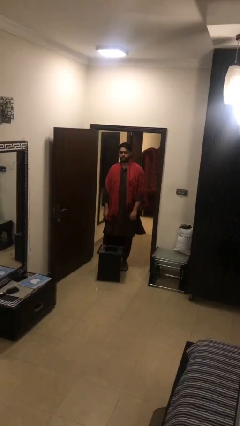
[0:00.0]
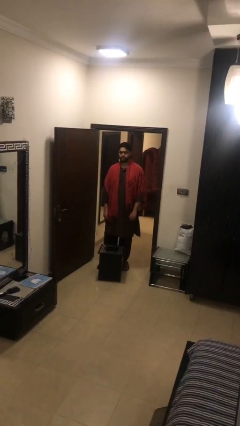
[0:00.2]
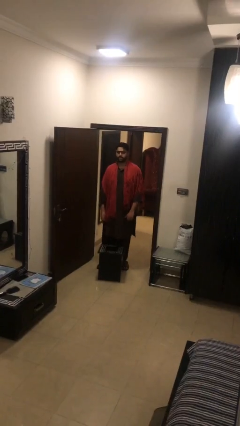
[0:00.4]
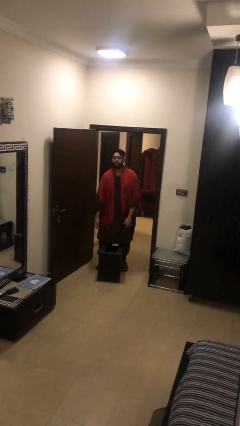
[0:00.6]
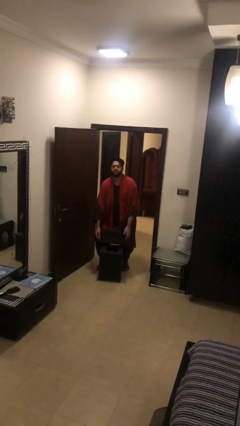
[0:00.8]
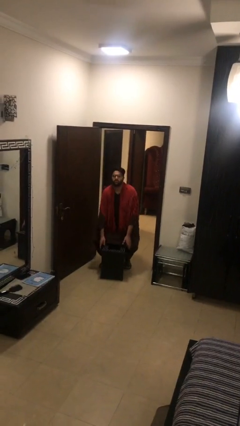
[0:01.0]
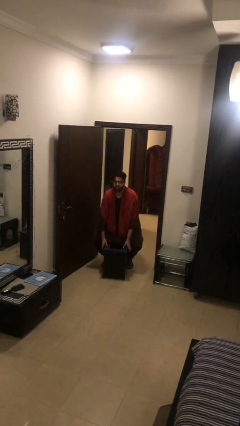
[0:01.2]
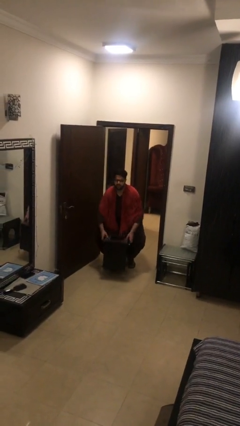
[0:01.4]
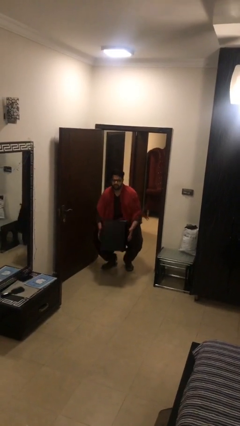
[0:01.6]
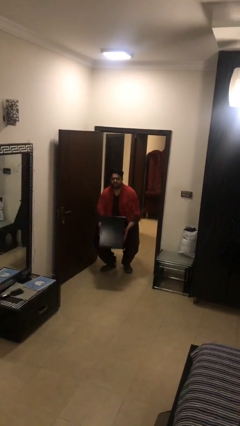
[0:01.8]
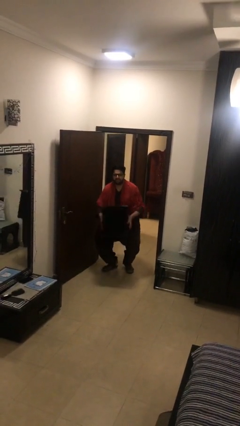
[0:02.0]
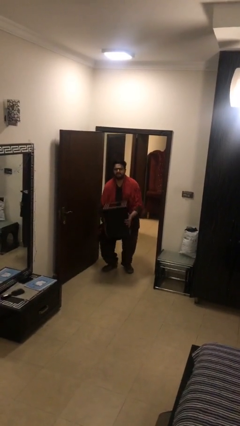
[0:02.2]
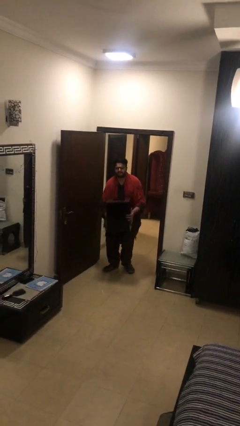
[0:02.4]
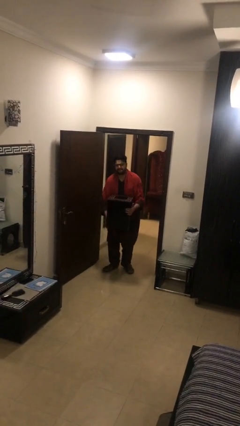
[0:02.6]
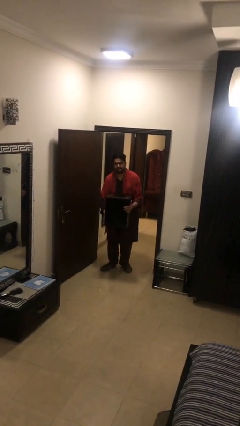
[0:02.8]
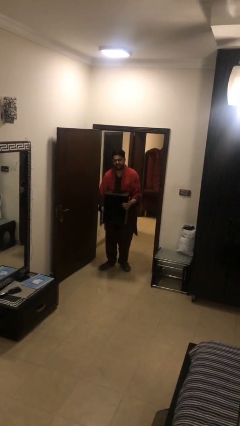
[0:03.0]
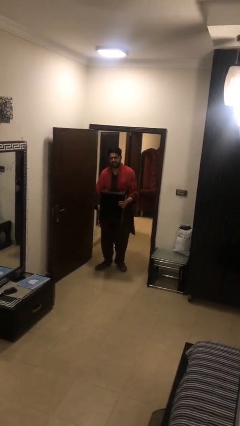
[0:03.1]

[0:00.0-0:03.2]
person picks up object from floor

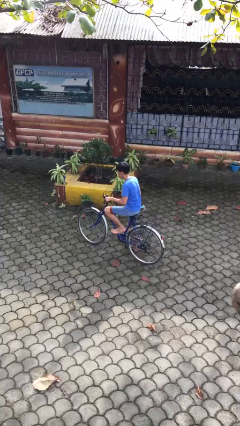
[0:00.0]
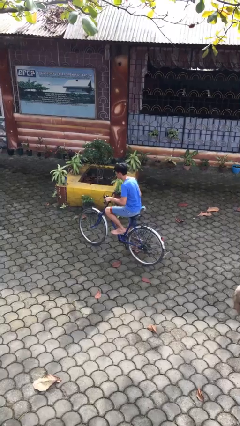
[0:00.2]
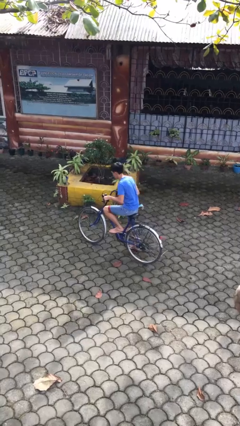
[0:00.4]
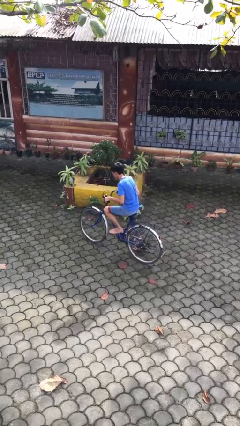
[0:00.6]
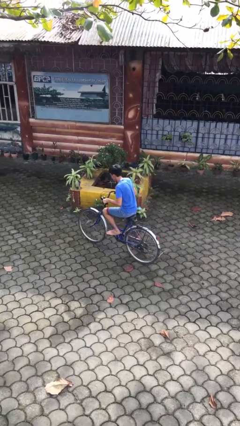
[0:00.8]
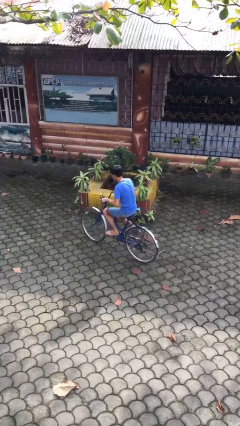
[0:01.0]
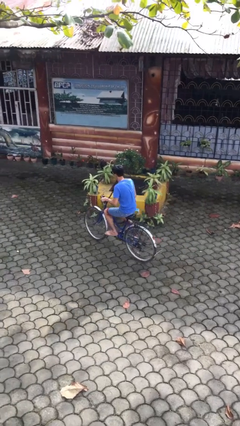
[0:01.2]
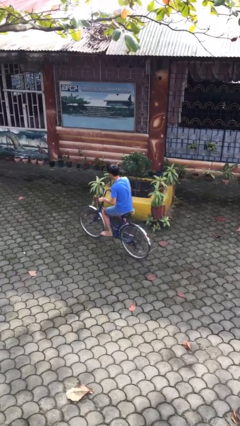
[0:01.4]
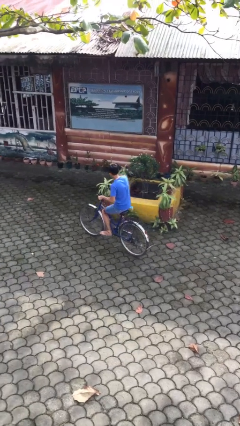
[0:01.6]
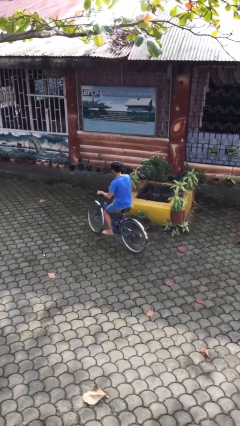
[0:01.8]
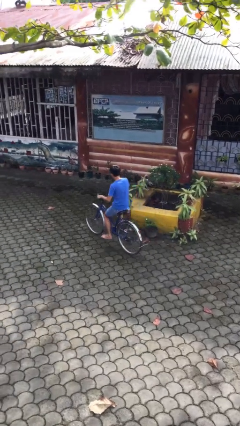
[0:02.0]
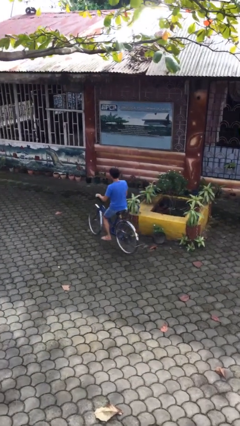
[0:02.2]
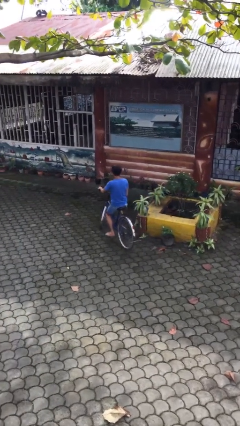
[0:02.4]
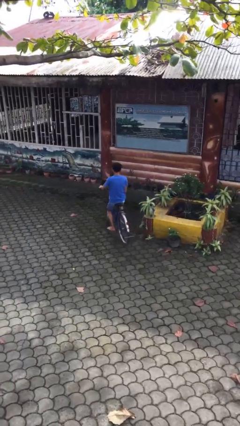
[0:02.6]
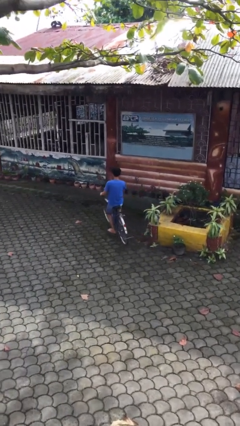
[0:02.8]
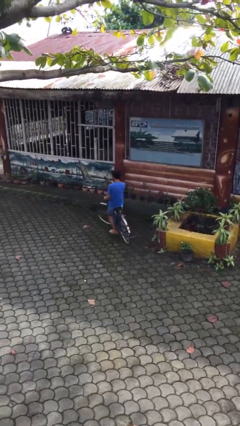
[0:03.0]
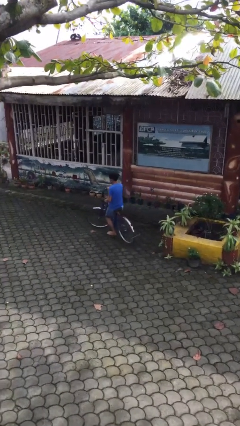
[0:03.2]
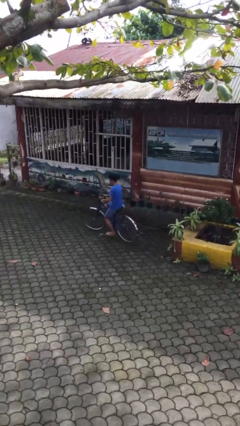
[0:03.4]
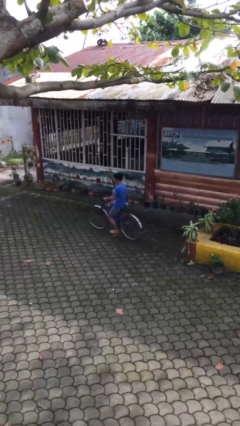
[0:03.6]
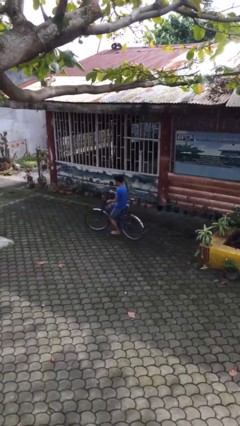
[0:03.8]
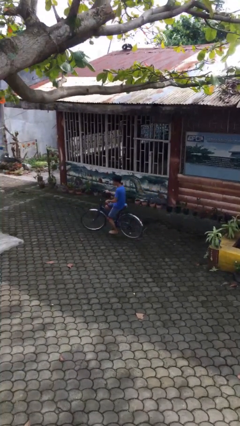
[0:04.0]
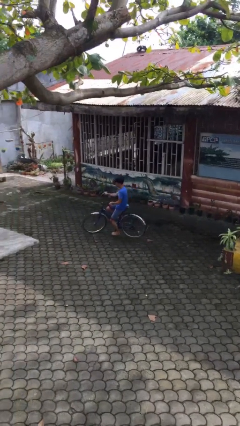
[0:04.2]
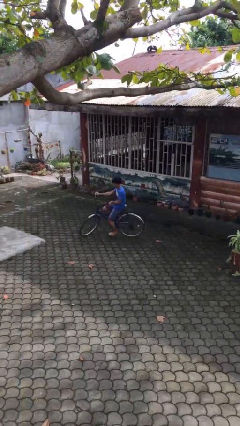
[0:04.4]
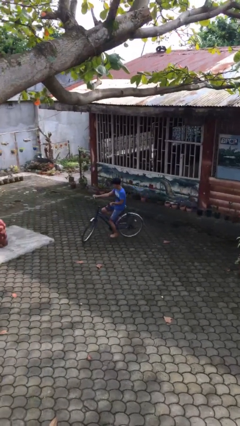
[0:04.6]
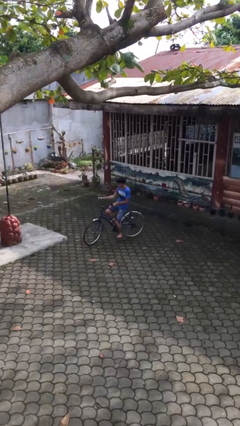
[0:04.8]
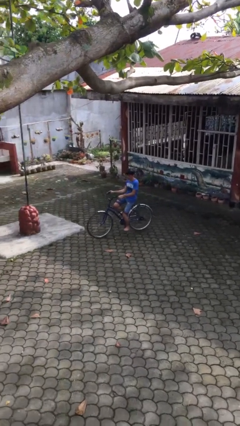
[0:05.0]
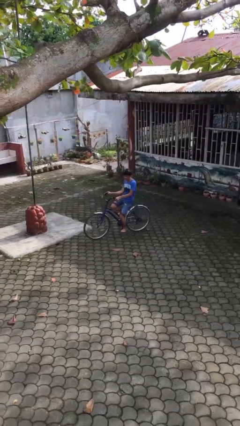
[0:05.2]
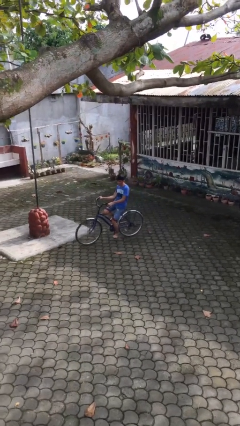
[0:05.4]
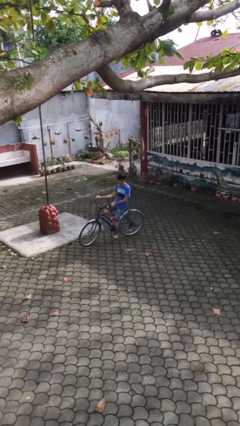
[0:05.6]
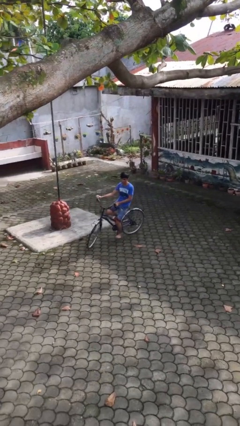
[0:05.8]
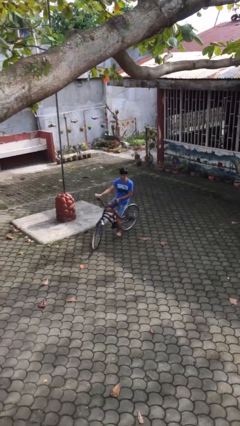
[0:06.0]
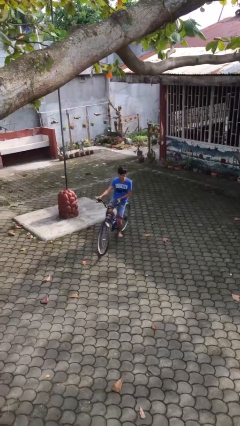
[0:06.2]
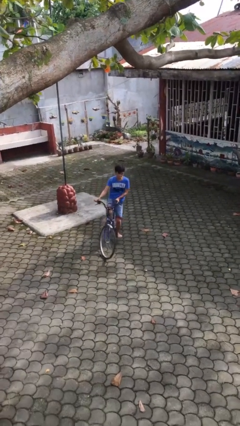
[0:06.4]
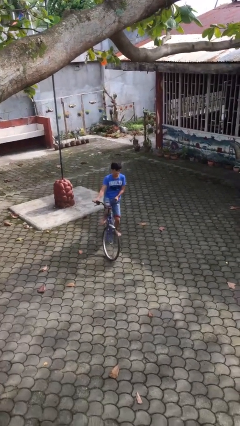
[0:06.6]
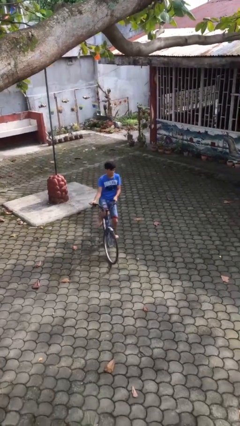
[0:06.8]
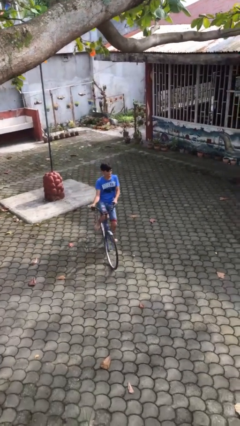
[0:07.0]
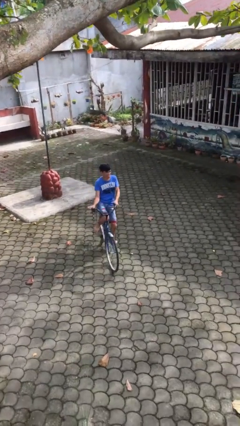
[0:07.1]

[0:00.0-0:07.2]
person rides bicycle

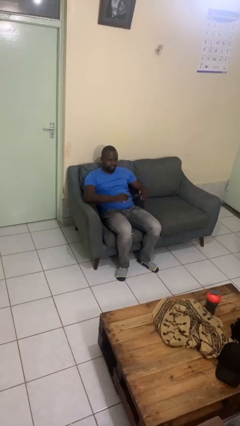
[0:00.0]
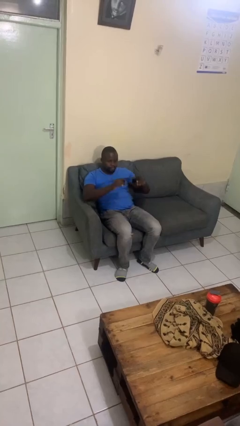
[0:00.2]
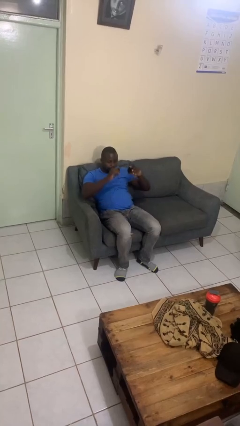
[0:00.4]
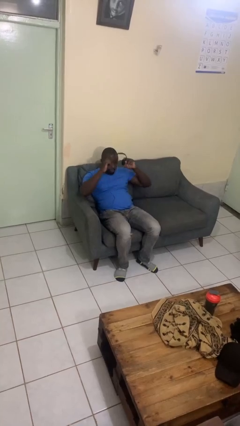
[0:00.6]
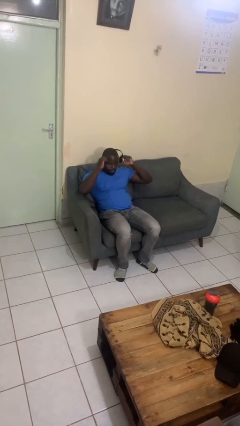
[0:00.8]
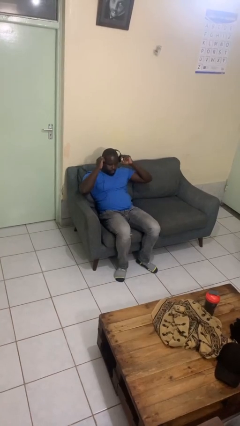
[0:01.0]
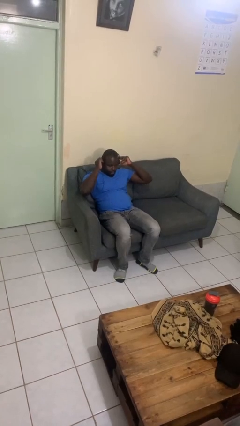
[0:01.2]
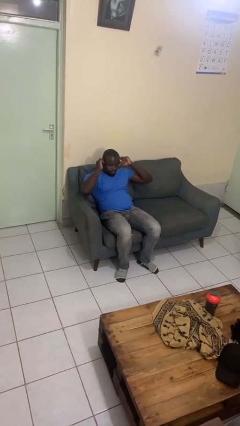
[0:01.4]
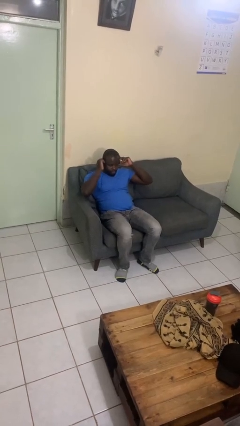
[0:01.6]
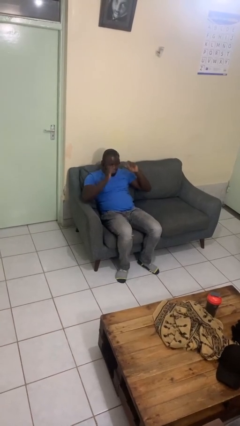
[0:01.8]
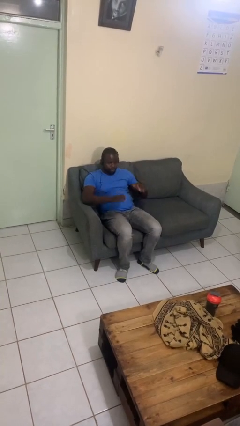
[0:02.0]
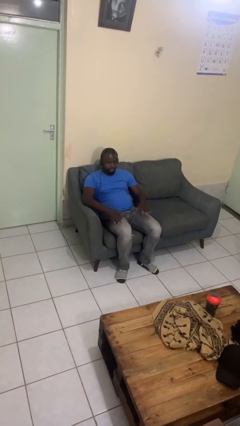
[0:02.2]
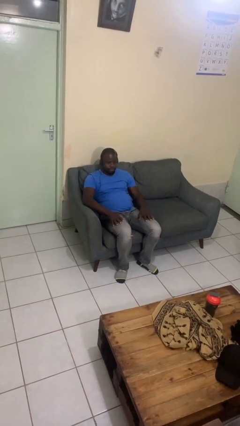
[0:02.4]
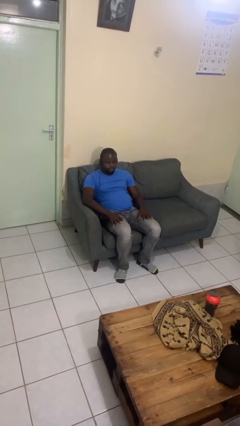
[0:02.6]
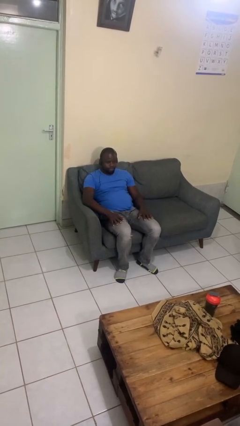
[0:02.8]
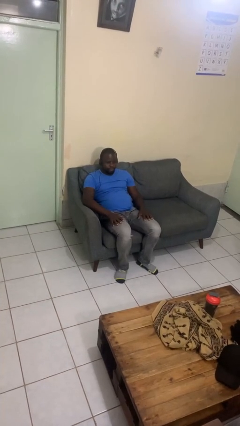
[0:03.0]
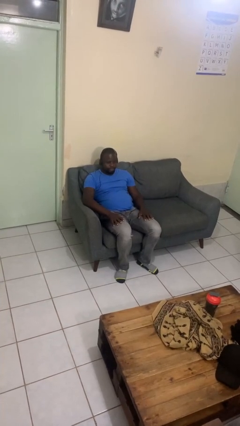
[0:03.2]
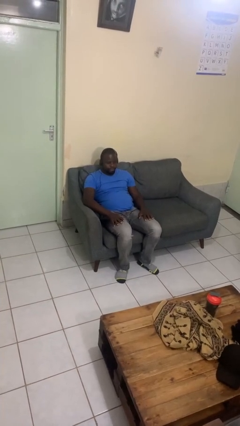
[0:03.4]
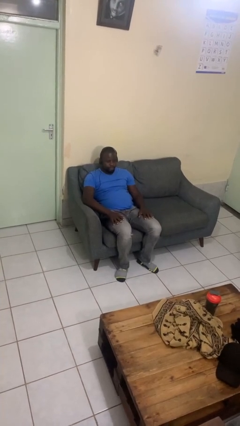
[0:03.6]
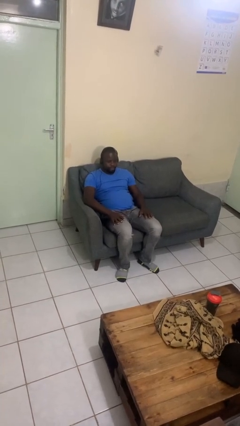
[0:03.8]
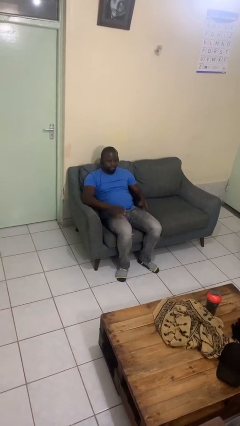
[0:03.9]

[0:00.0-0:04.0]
person puts on headphones

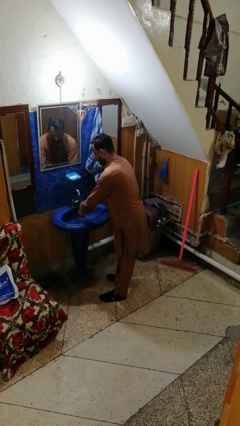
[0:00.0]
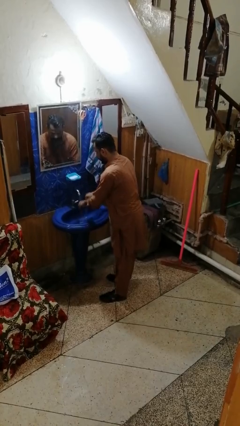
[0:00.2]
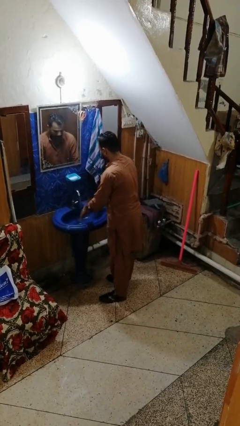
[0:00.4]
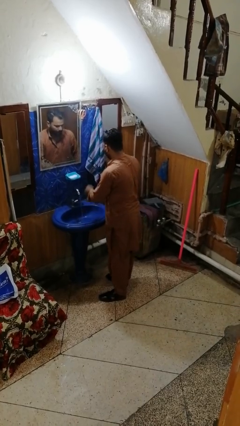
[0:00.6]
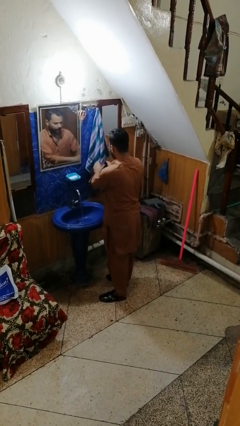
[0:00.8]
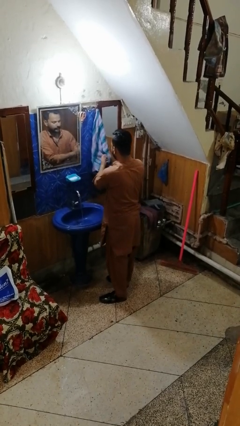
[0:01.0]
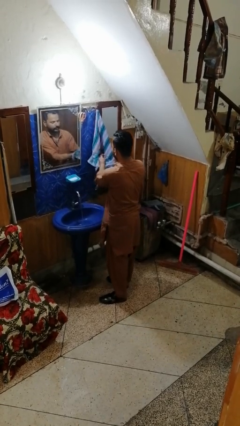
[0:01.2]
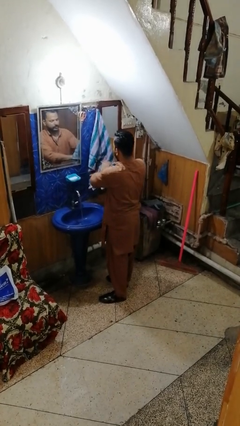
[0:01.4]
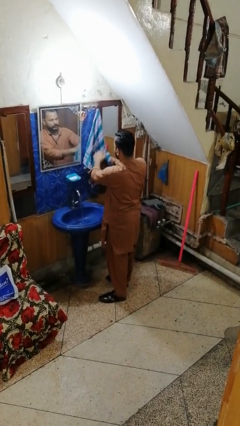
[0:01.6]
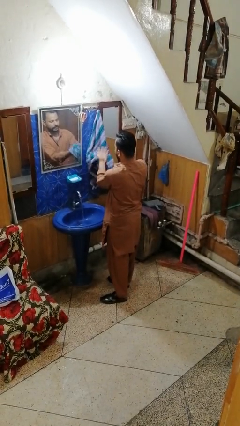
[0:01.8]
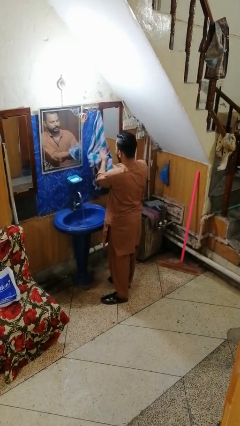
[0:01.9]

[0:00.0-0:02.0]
person dries hands with towel

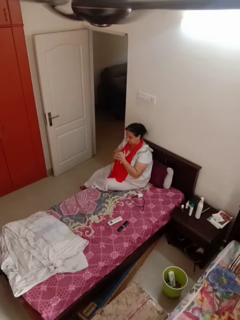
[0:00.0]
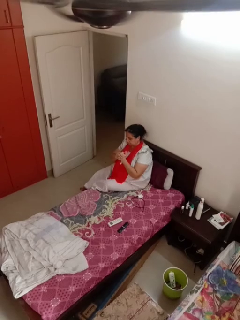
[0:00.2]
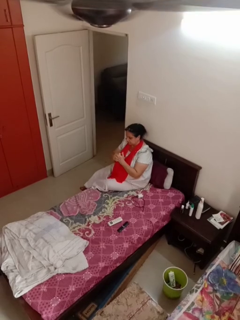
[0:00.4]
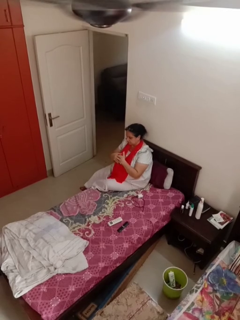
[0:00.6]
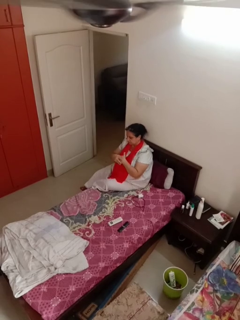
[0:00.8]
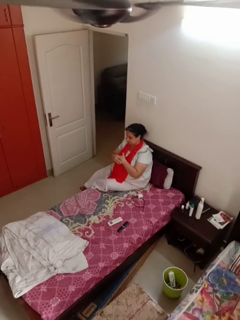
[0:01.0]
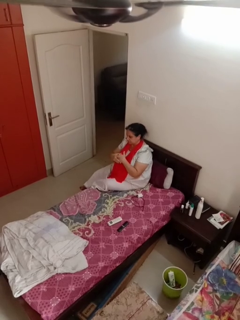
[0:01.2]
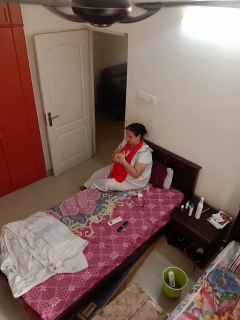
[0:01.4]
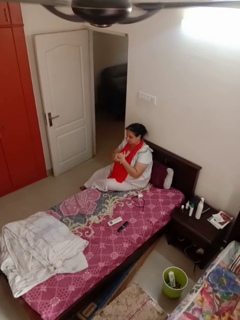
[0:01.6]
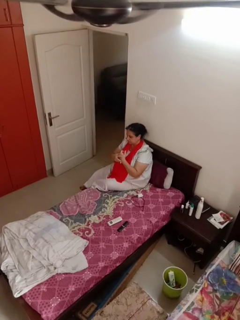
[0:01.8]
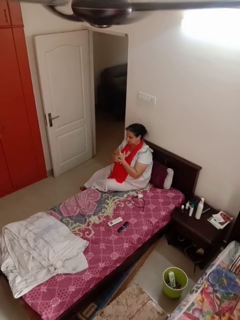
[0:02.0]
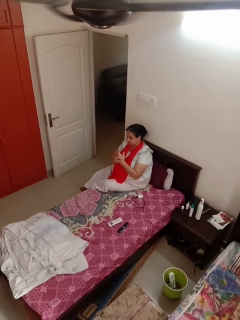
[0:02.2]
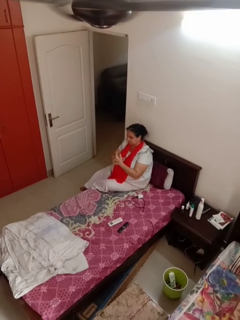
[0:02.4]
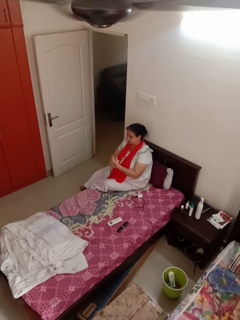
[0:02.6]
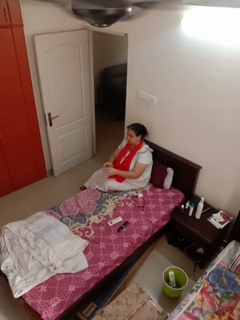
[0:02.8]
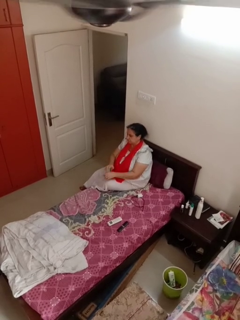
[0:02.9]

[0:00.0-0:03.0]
person cracks knuckles
